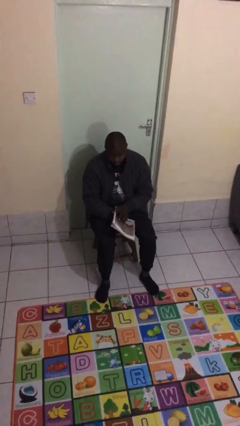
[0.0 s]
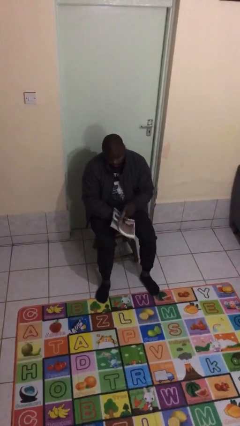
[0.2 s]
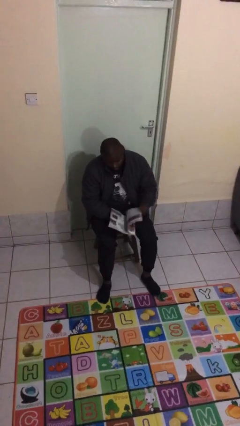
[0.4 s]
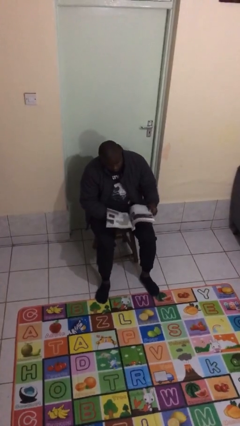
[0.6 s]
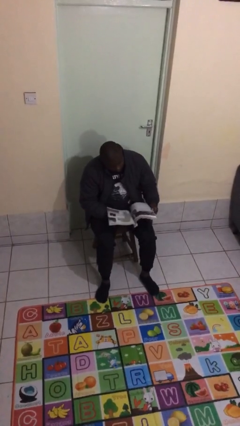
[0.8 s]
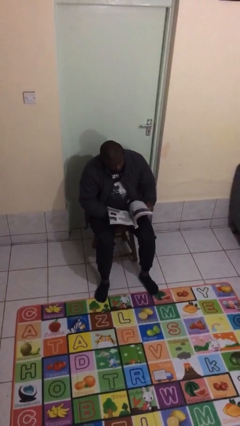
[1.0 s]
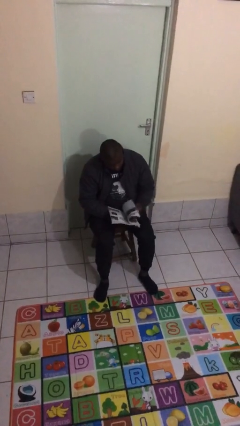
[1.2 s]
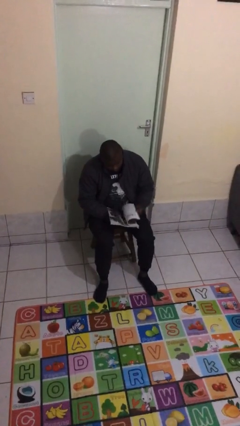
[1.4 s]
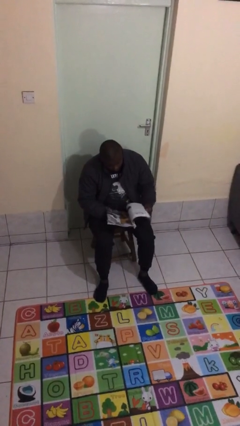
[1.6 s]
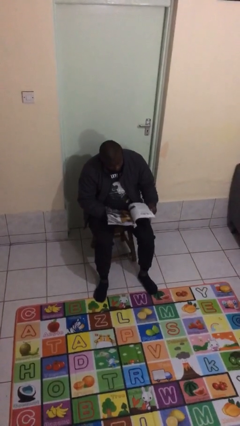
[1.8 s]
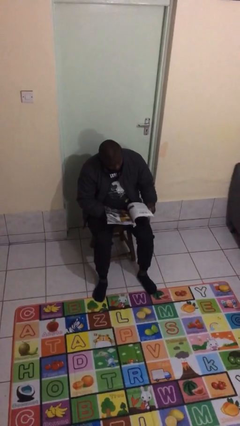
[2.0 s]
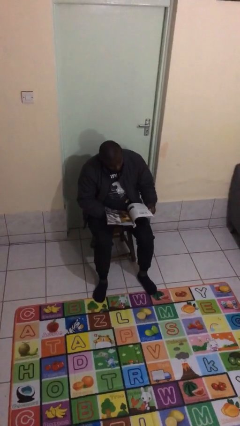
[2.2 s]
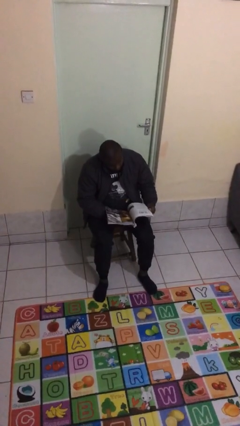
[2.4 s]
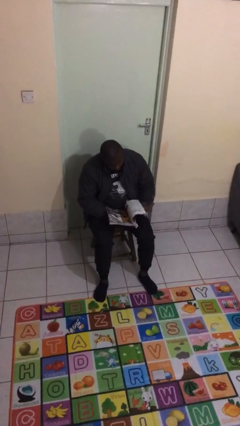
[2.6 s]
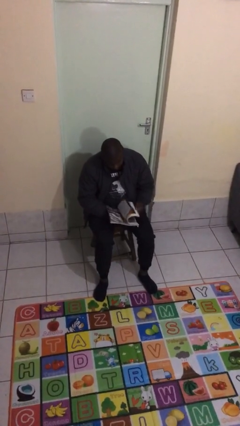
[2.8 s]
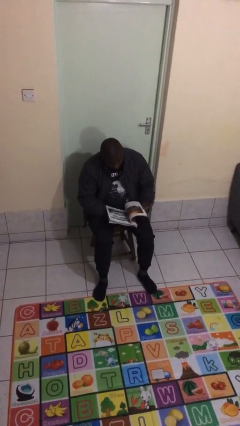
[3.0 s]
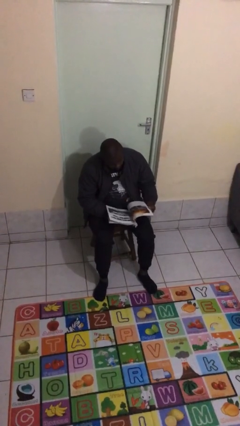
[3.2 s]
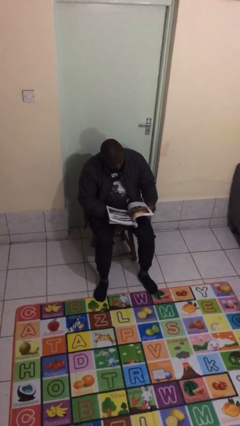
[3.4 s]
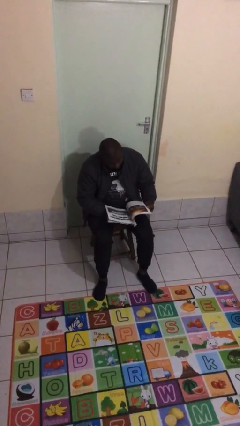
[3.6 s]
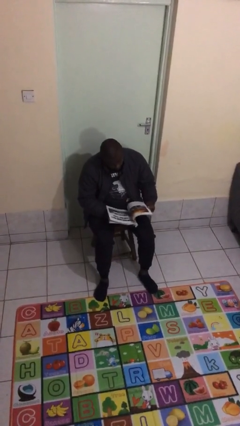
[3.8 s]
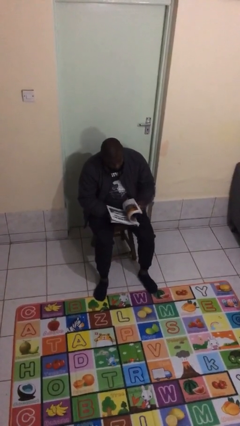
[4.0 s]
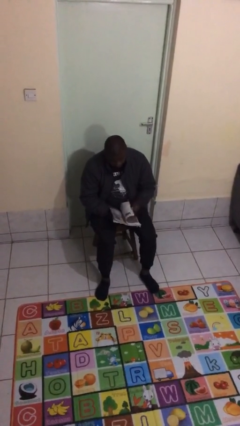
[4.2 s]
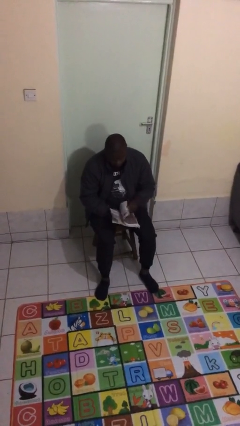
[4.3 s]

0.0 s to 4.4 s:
person reads magazine

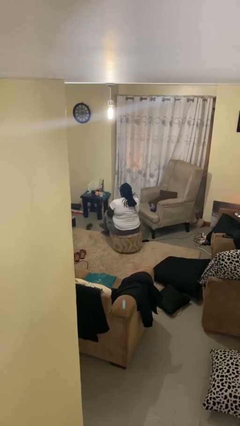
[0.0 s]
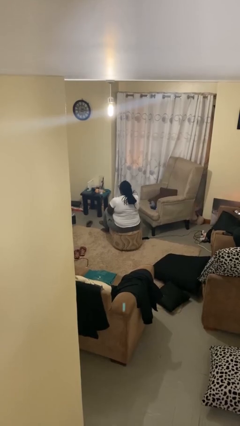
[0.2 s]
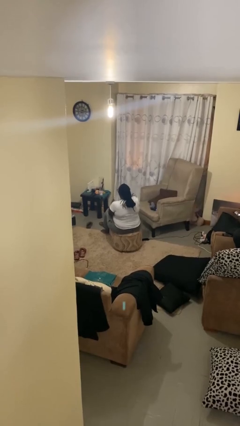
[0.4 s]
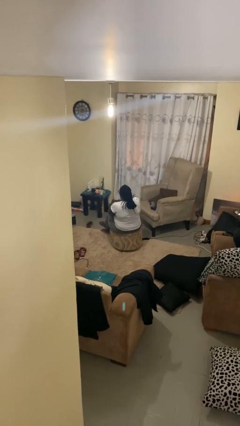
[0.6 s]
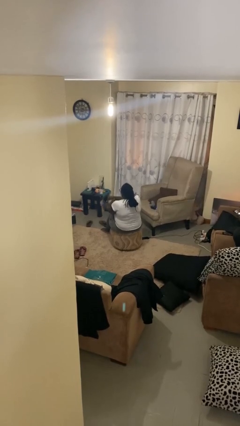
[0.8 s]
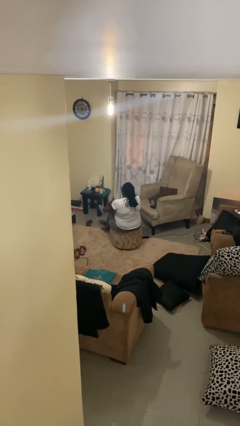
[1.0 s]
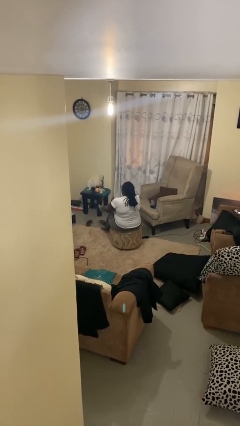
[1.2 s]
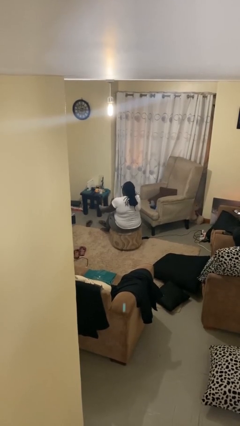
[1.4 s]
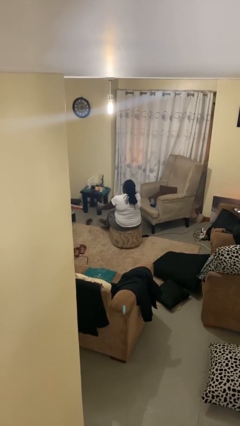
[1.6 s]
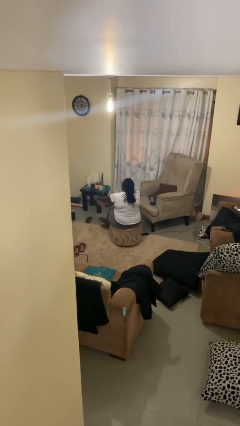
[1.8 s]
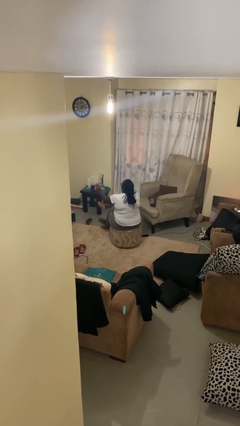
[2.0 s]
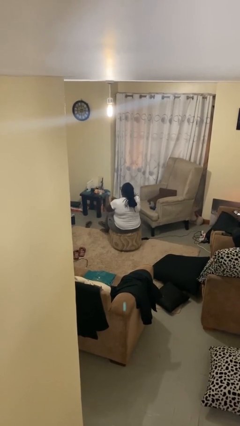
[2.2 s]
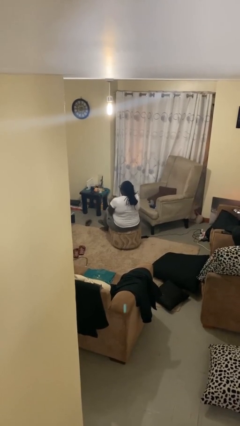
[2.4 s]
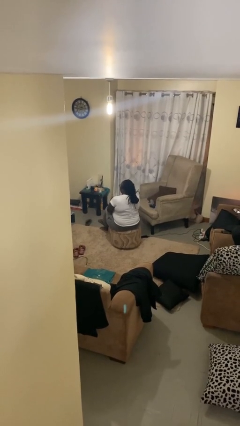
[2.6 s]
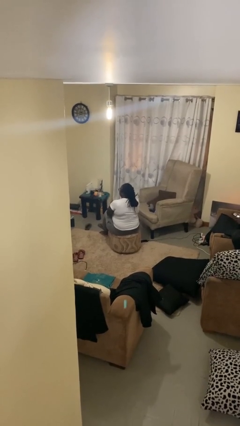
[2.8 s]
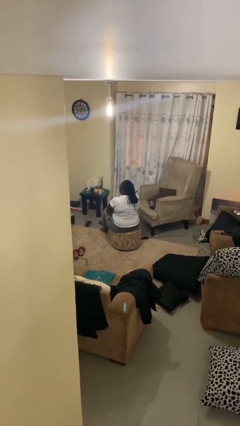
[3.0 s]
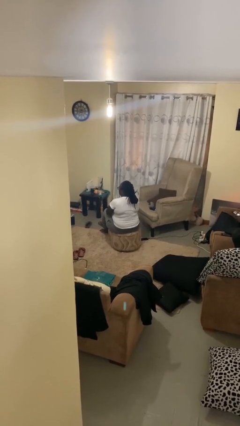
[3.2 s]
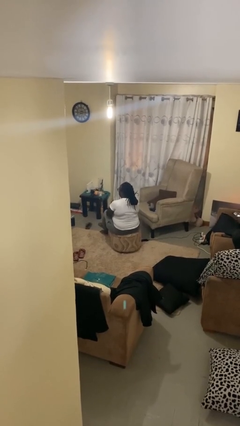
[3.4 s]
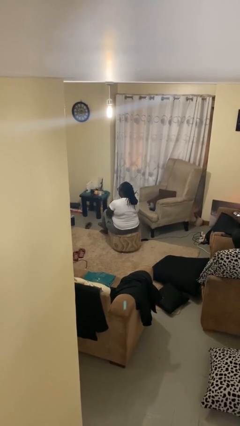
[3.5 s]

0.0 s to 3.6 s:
person takes off socks

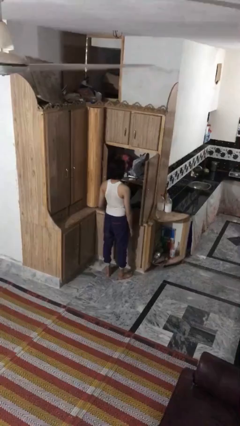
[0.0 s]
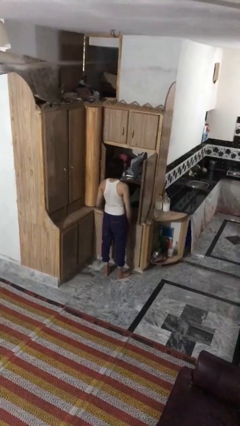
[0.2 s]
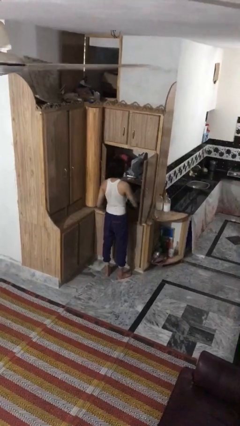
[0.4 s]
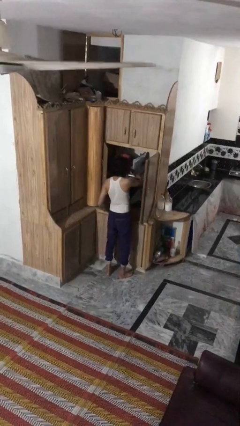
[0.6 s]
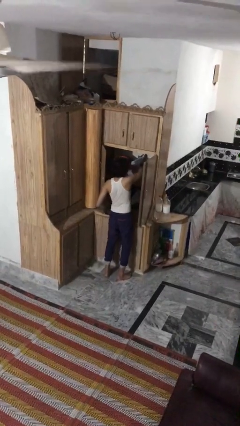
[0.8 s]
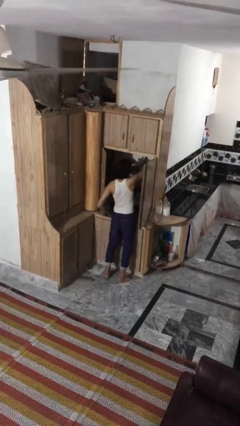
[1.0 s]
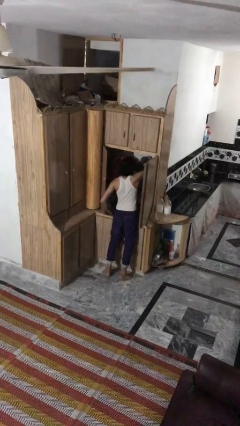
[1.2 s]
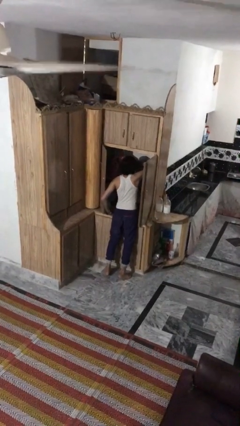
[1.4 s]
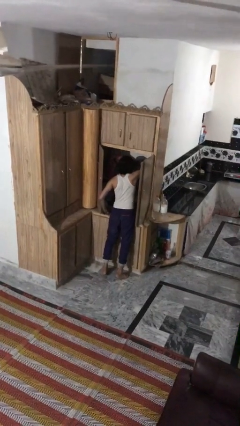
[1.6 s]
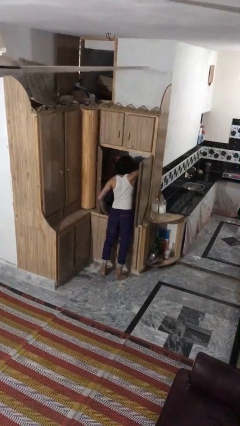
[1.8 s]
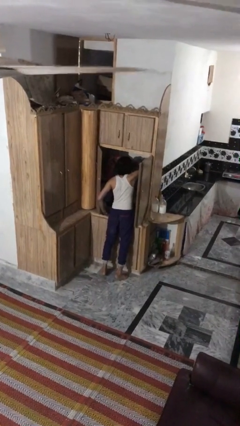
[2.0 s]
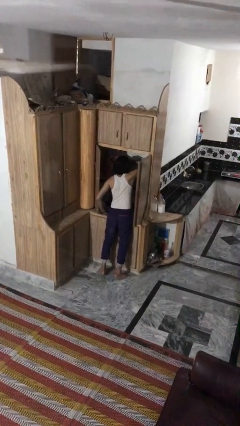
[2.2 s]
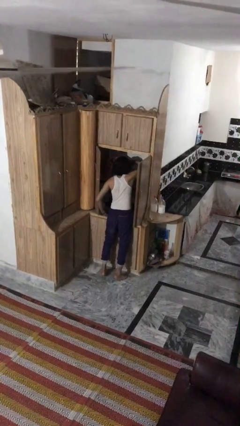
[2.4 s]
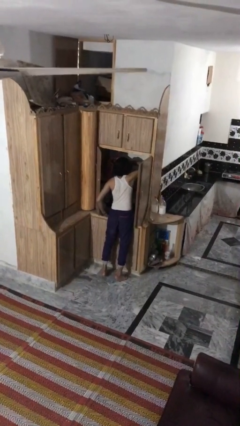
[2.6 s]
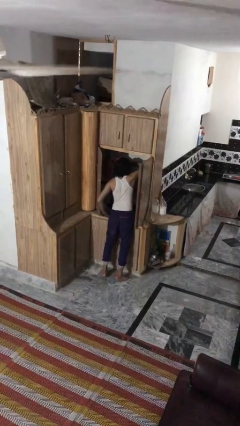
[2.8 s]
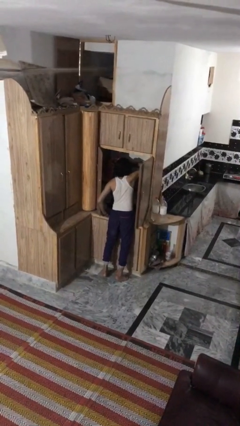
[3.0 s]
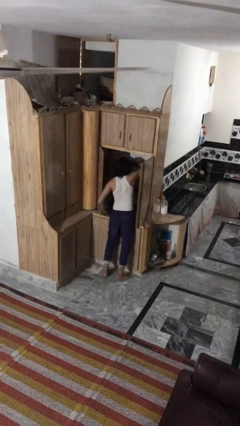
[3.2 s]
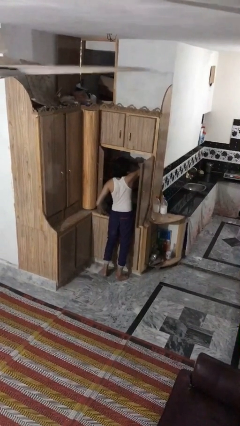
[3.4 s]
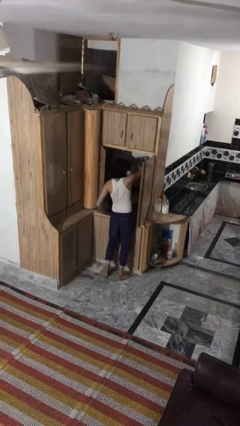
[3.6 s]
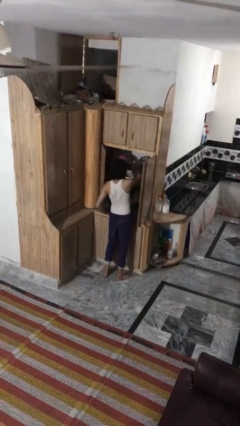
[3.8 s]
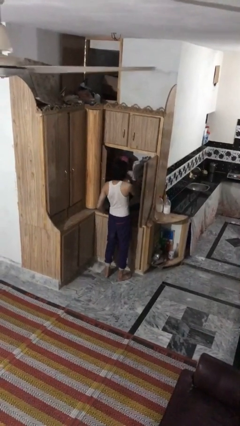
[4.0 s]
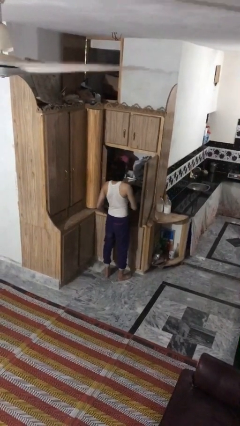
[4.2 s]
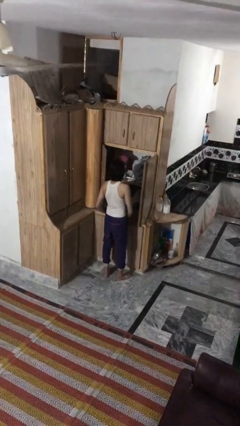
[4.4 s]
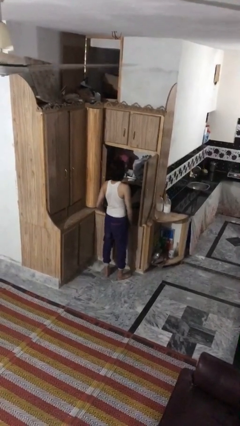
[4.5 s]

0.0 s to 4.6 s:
person searches in cabinet

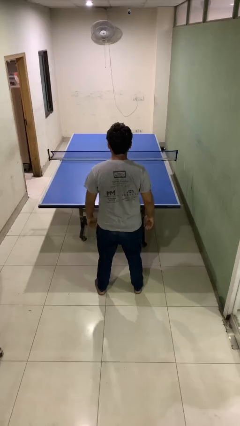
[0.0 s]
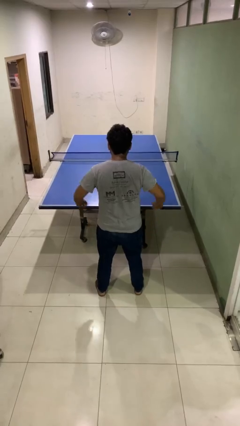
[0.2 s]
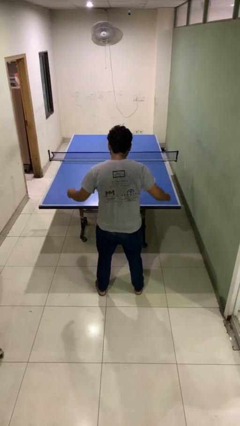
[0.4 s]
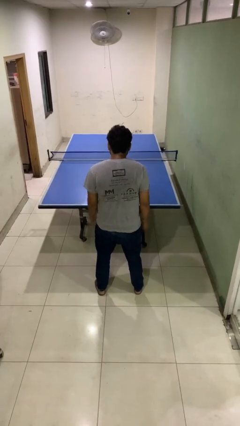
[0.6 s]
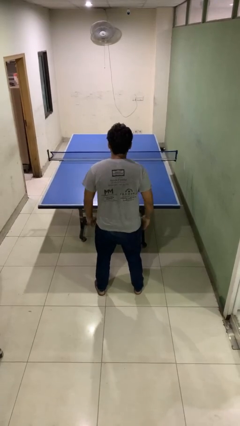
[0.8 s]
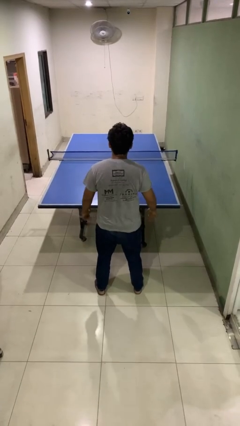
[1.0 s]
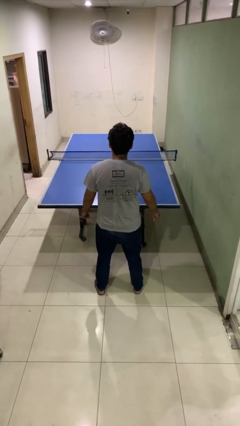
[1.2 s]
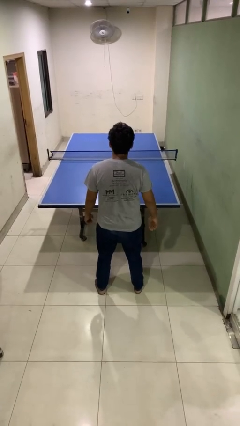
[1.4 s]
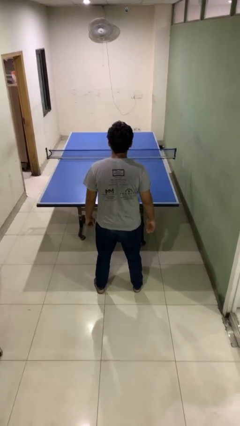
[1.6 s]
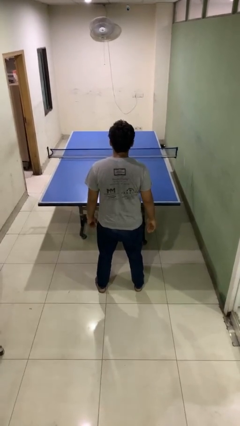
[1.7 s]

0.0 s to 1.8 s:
person slaps hands on thighs

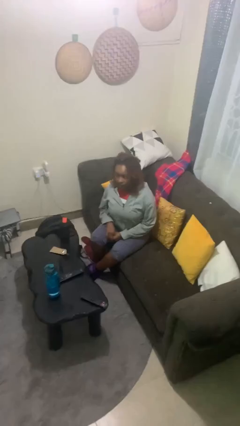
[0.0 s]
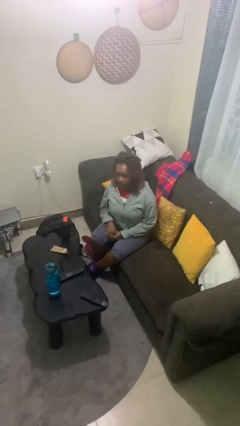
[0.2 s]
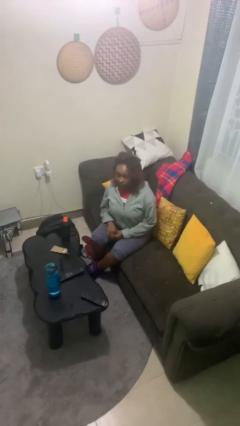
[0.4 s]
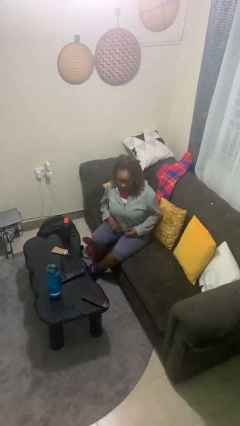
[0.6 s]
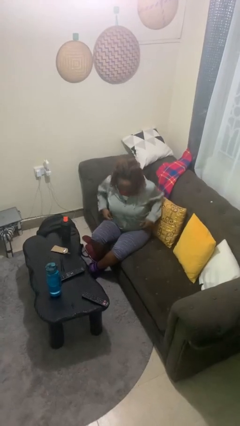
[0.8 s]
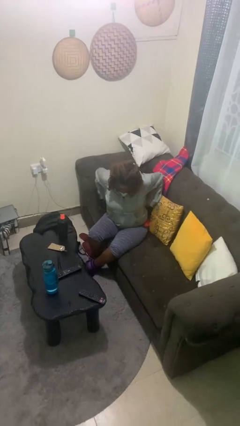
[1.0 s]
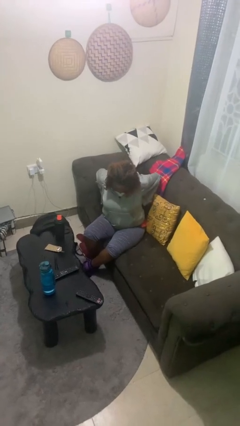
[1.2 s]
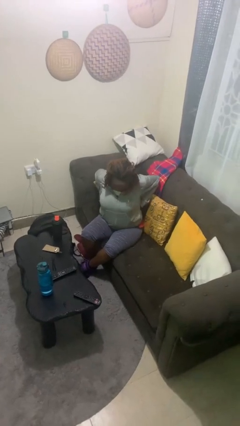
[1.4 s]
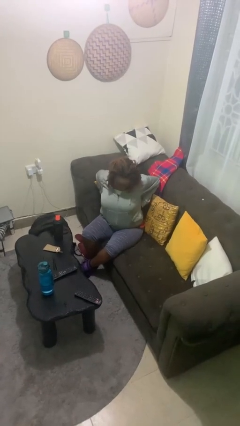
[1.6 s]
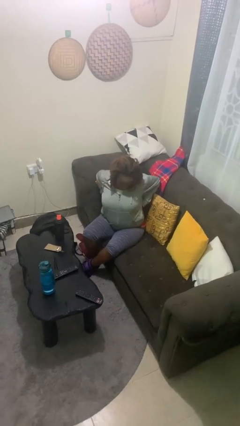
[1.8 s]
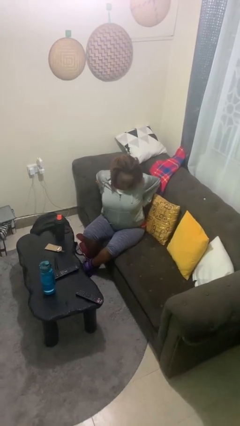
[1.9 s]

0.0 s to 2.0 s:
person stretches back

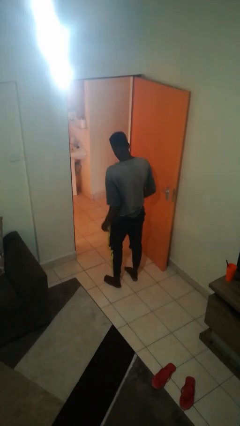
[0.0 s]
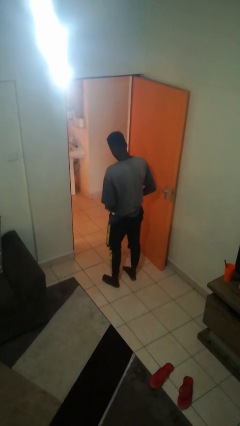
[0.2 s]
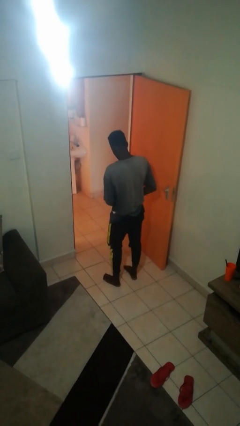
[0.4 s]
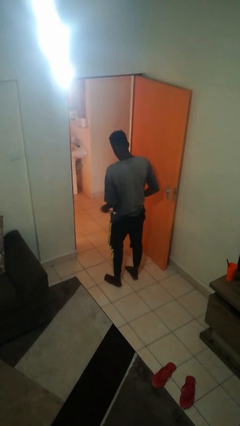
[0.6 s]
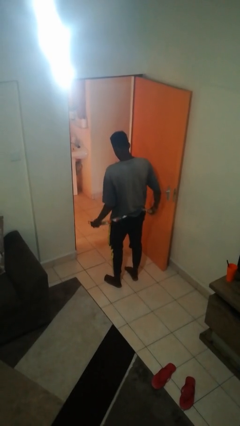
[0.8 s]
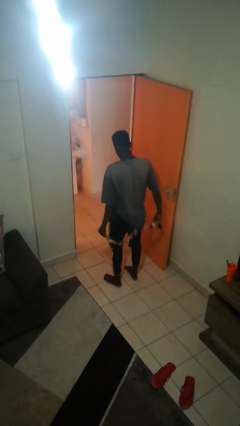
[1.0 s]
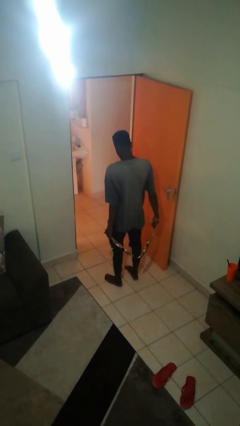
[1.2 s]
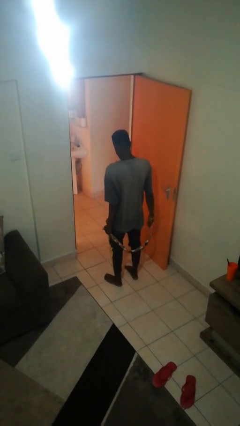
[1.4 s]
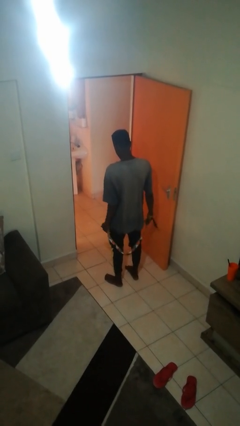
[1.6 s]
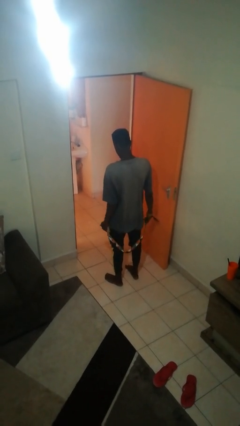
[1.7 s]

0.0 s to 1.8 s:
person takes off belt
